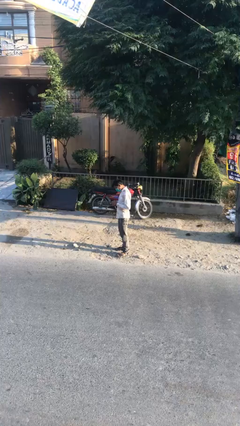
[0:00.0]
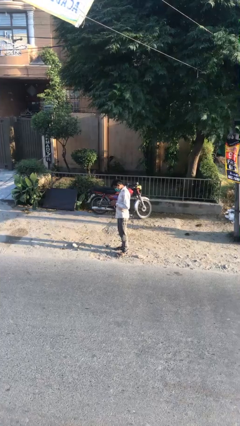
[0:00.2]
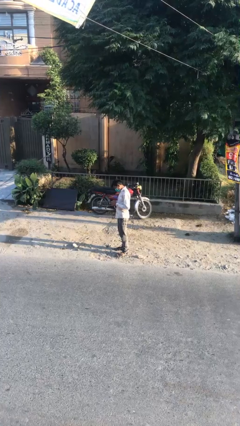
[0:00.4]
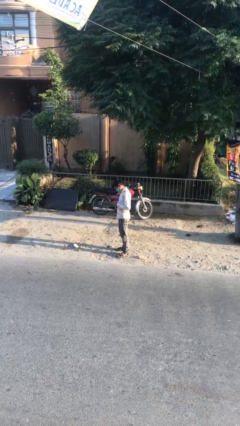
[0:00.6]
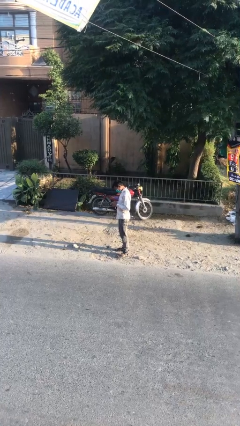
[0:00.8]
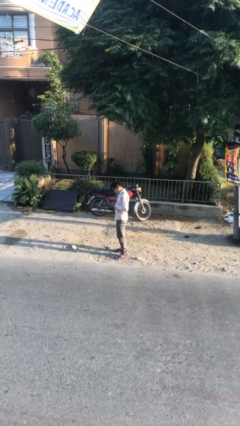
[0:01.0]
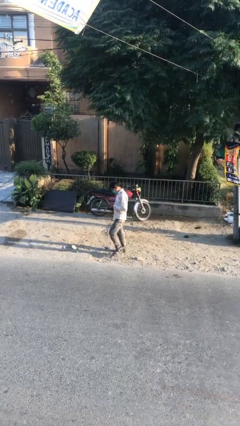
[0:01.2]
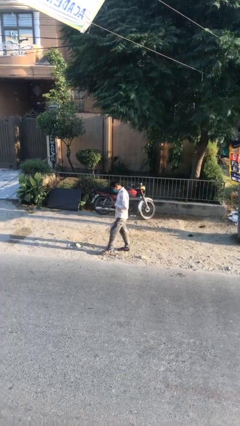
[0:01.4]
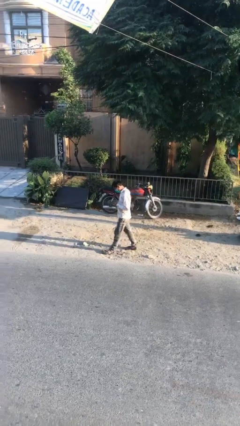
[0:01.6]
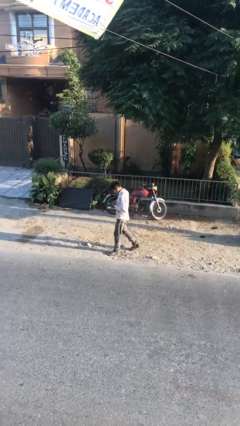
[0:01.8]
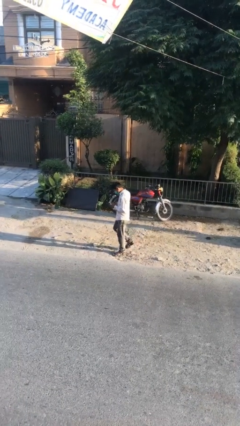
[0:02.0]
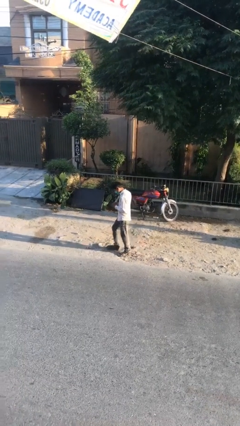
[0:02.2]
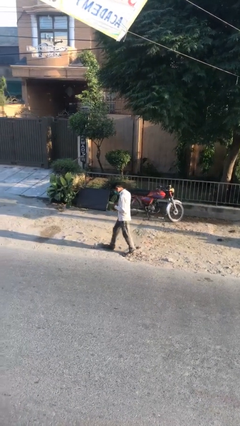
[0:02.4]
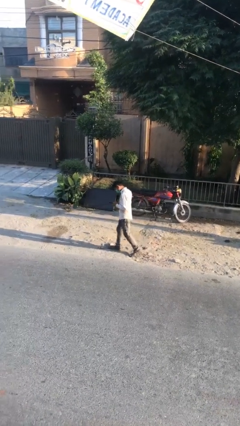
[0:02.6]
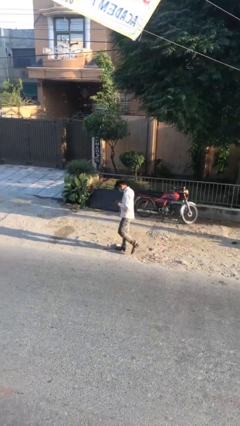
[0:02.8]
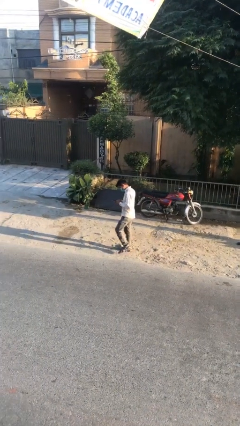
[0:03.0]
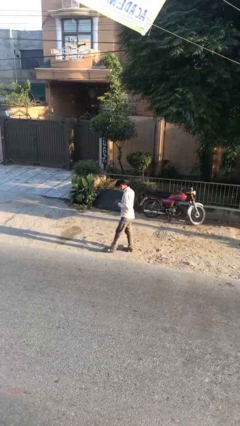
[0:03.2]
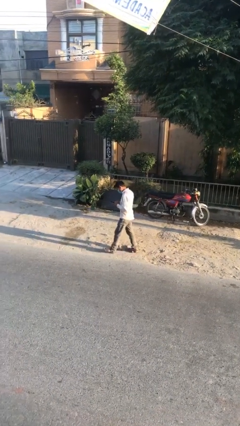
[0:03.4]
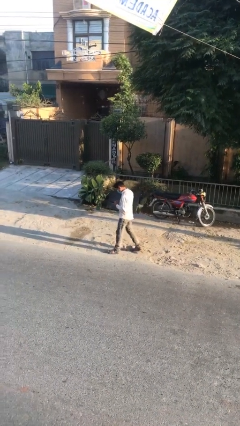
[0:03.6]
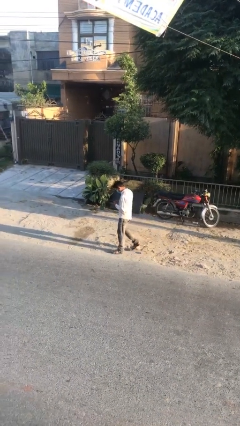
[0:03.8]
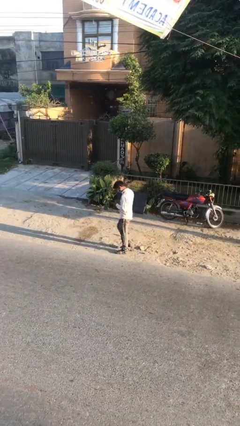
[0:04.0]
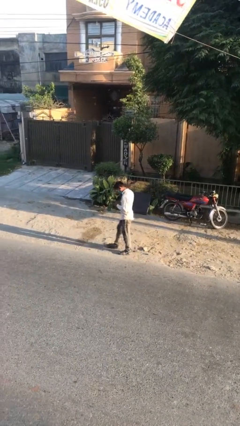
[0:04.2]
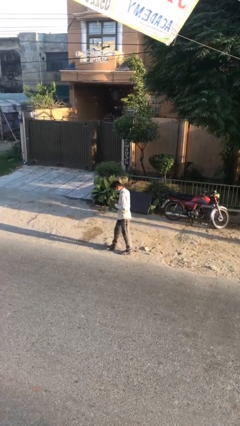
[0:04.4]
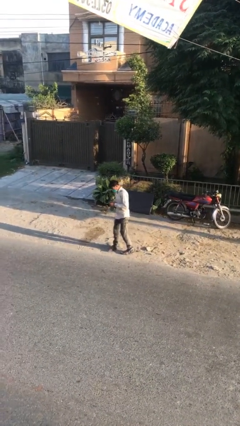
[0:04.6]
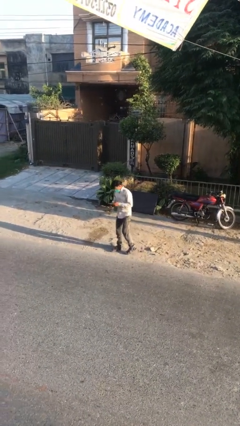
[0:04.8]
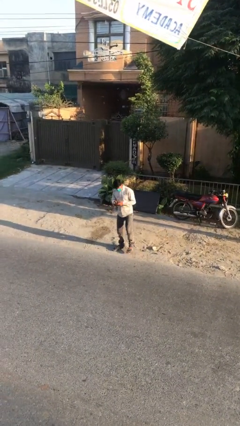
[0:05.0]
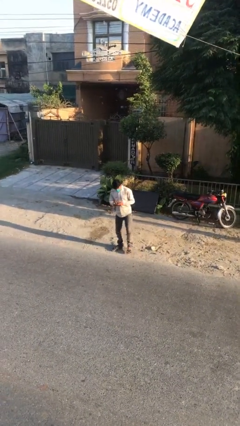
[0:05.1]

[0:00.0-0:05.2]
person texts on phone

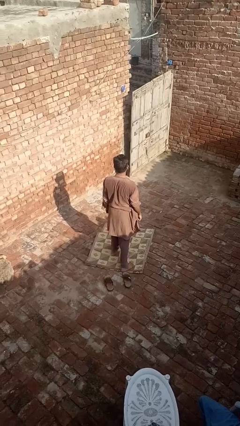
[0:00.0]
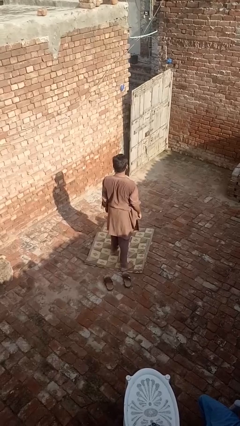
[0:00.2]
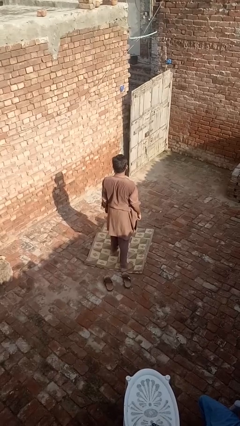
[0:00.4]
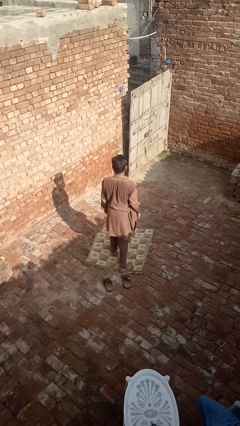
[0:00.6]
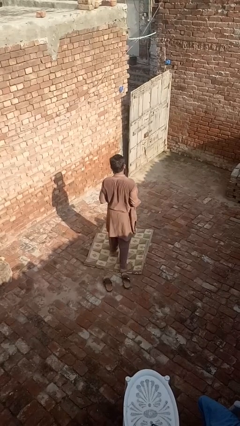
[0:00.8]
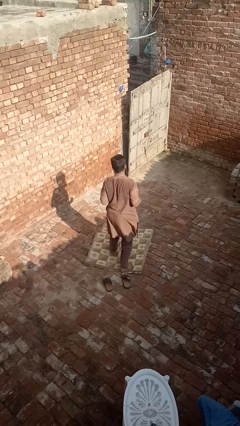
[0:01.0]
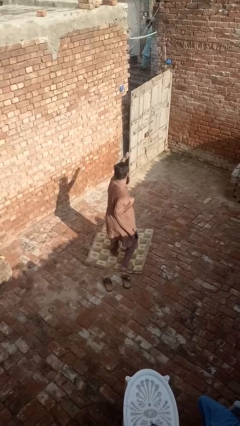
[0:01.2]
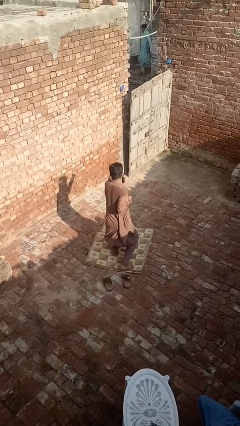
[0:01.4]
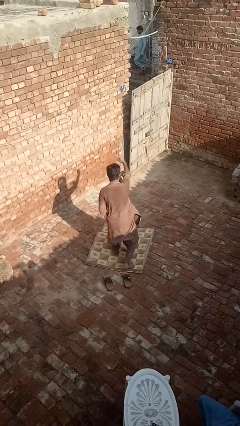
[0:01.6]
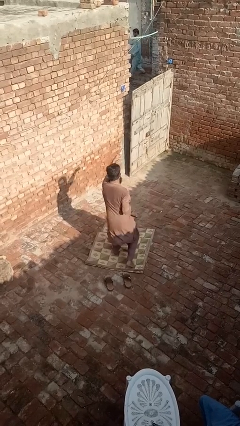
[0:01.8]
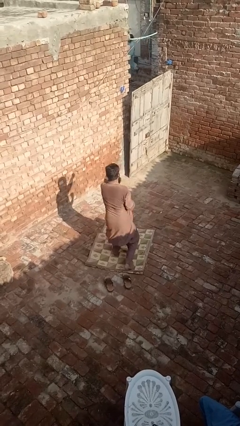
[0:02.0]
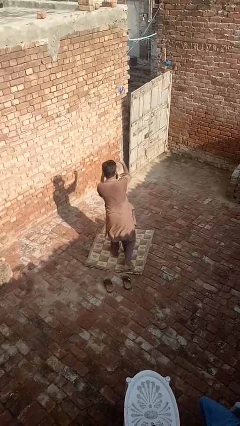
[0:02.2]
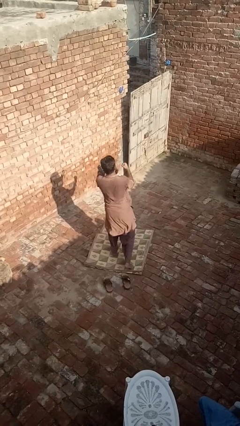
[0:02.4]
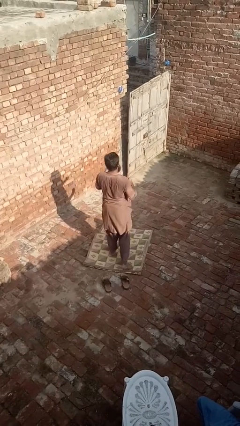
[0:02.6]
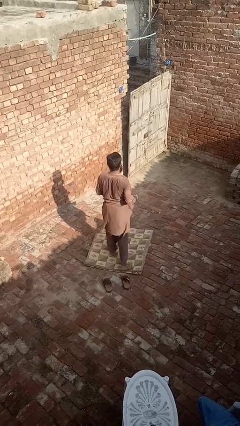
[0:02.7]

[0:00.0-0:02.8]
person punches

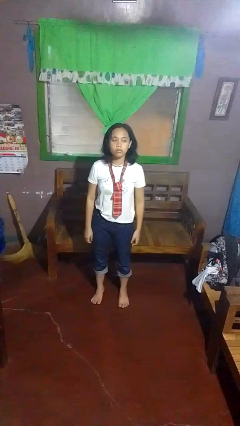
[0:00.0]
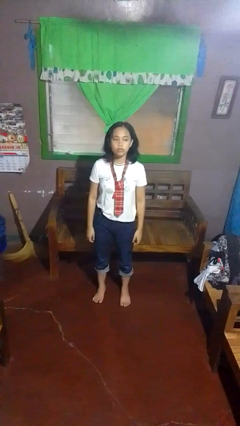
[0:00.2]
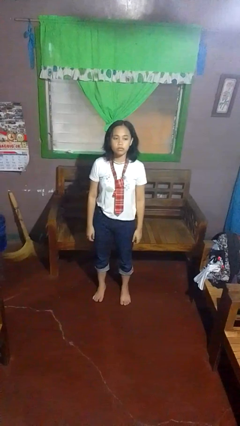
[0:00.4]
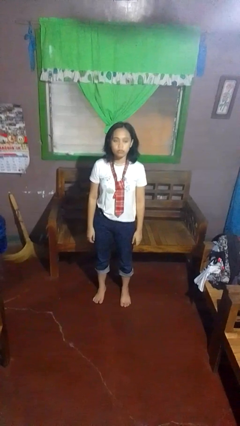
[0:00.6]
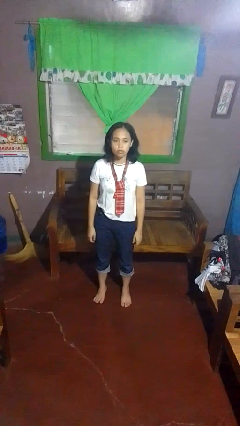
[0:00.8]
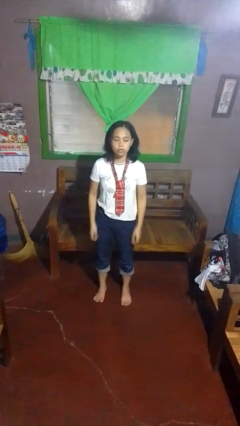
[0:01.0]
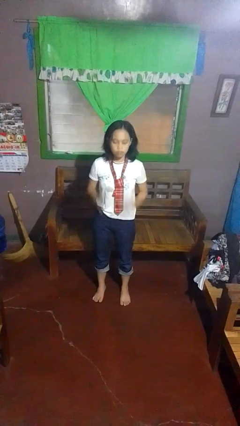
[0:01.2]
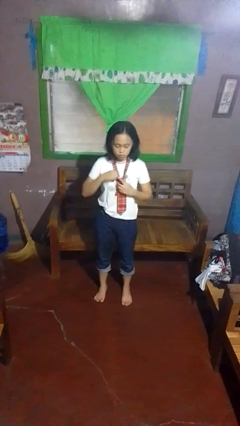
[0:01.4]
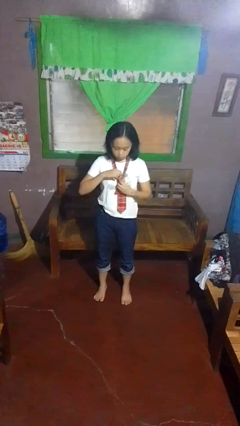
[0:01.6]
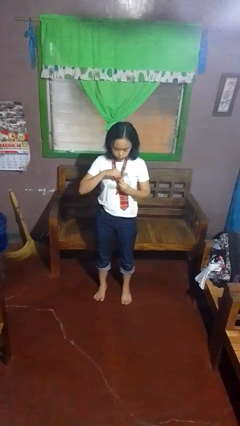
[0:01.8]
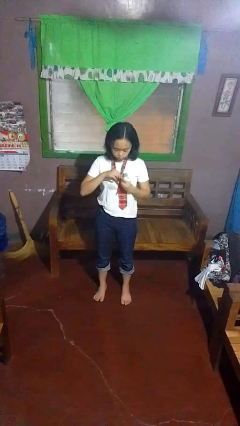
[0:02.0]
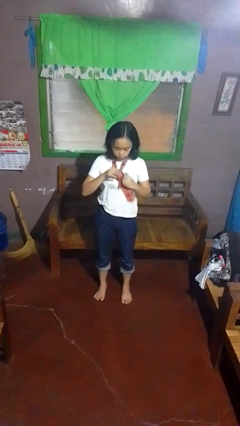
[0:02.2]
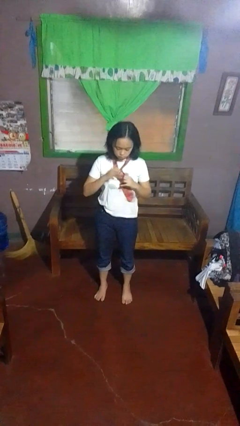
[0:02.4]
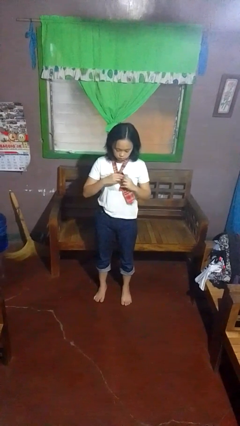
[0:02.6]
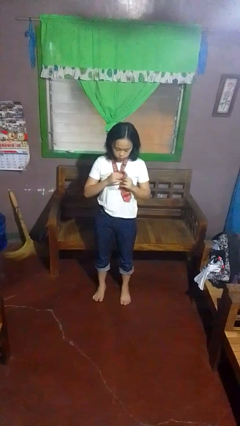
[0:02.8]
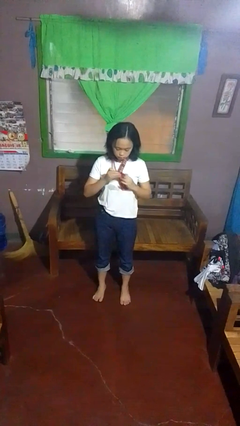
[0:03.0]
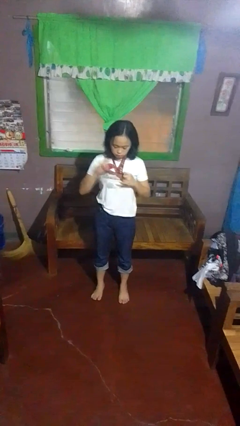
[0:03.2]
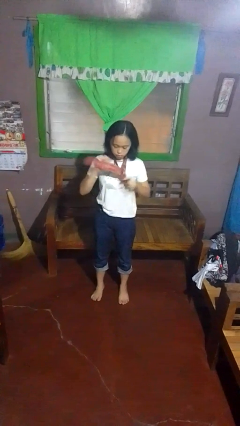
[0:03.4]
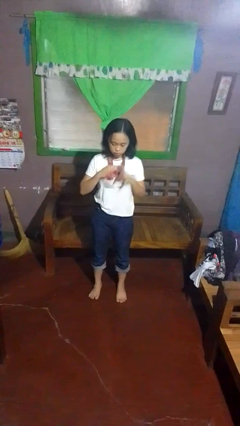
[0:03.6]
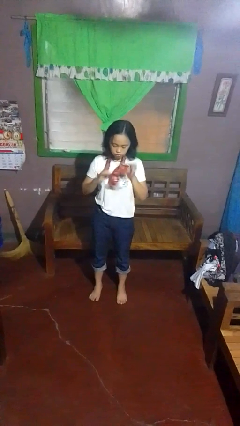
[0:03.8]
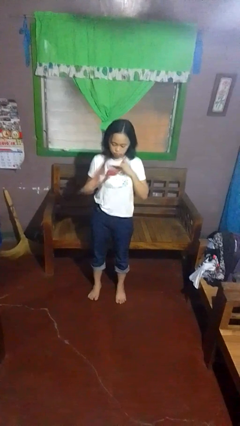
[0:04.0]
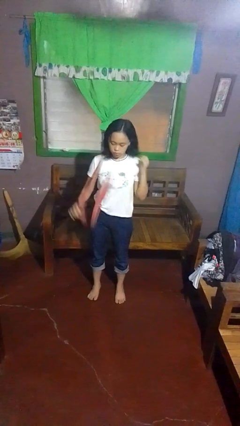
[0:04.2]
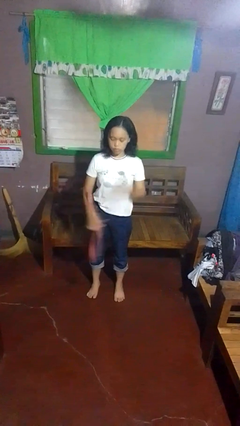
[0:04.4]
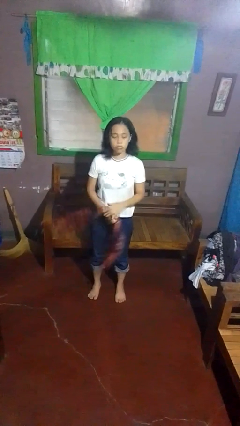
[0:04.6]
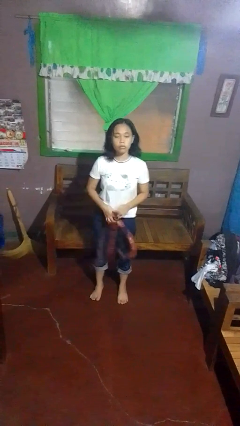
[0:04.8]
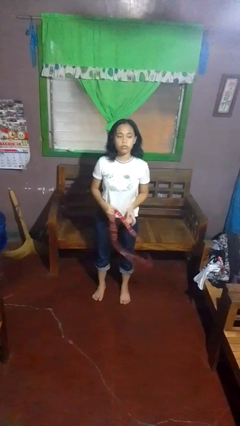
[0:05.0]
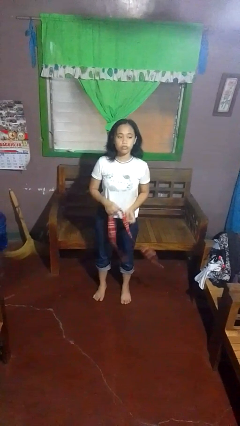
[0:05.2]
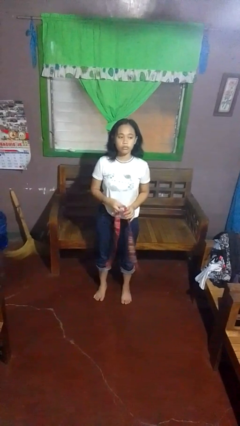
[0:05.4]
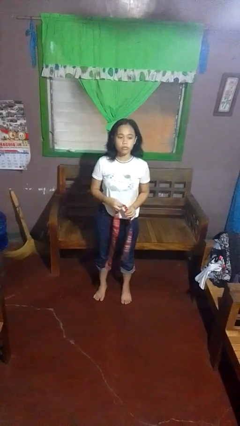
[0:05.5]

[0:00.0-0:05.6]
person takes off necktie

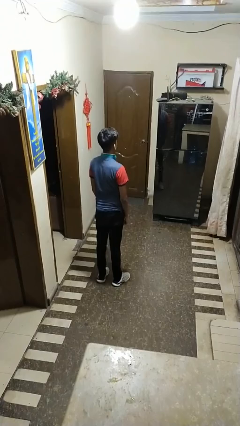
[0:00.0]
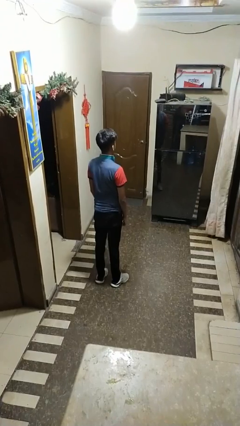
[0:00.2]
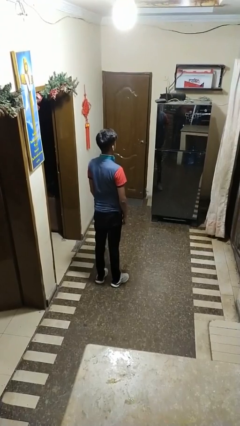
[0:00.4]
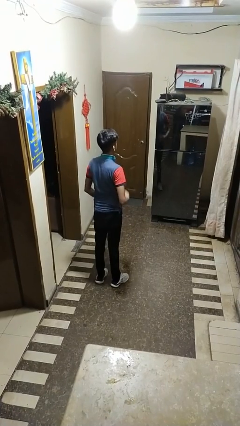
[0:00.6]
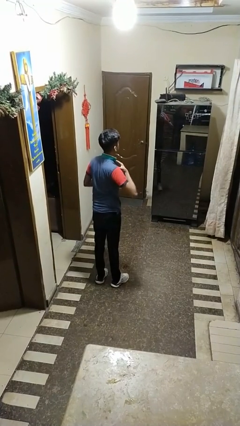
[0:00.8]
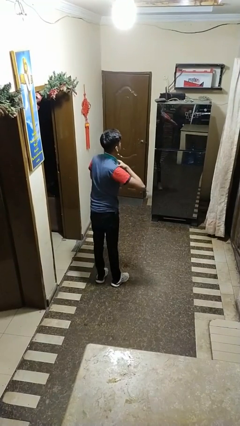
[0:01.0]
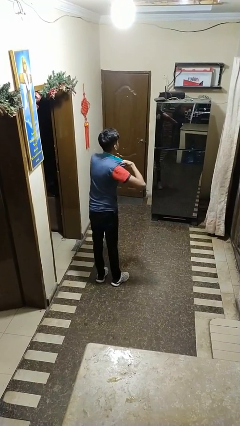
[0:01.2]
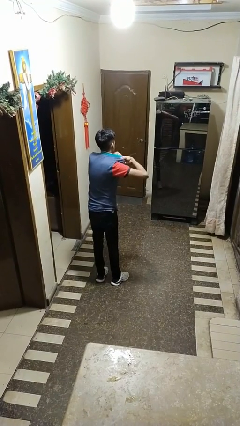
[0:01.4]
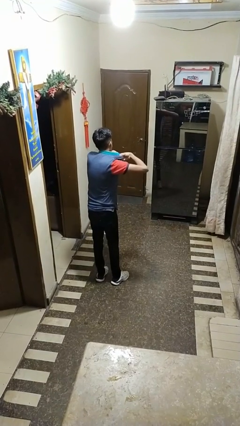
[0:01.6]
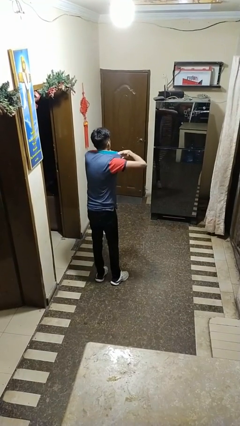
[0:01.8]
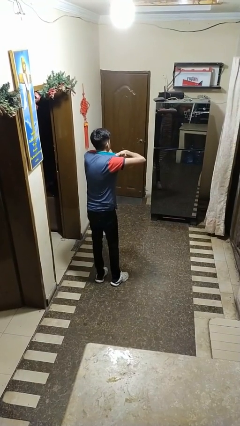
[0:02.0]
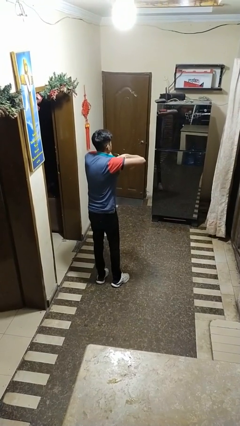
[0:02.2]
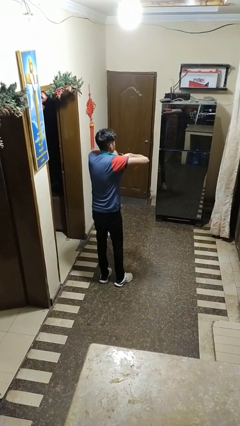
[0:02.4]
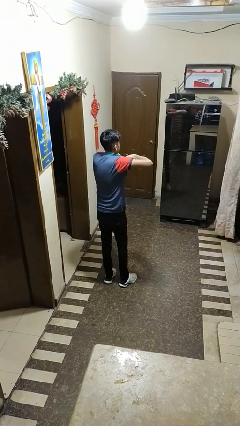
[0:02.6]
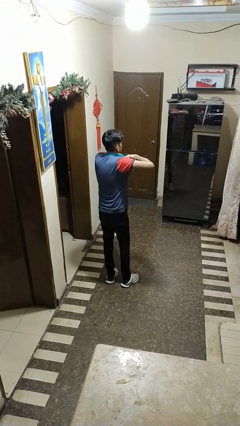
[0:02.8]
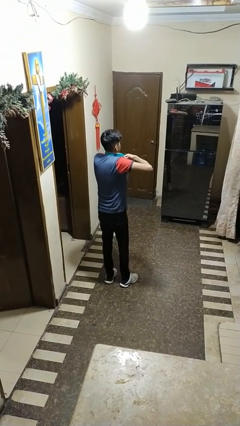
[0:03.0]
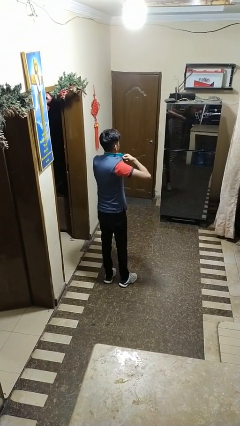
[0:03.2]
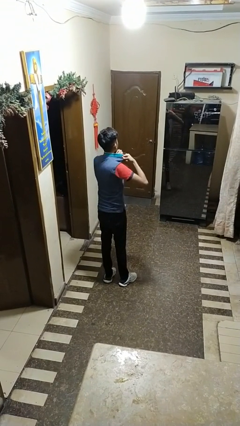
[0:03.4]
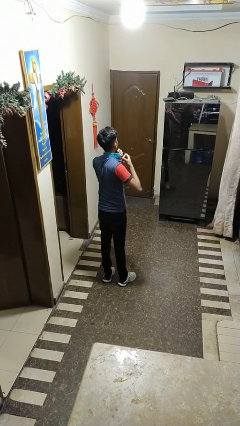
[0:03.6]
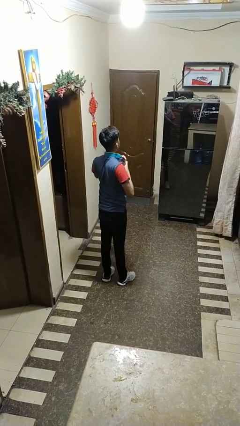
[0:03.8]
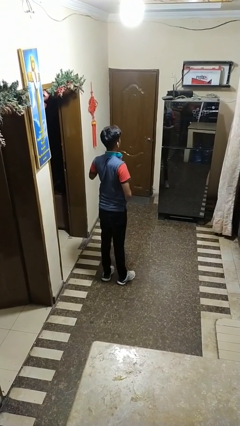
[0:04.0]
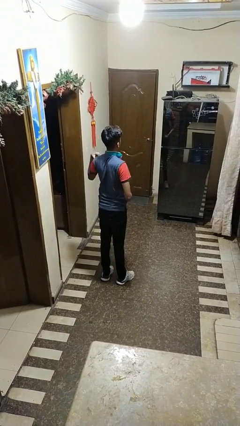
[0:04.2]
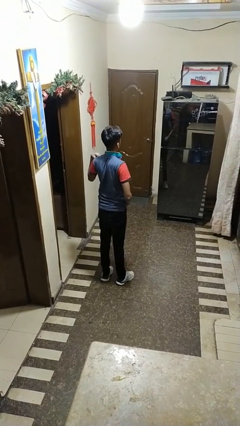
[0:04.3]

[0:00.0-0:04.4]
person applies deodorant

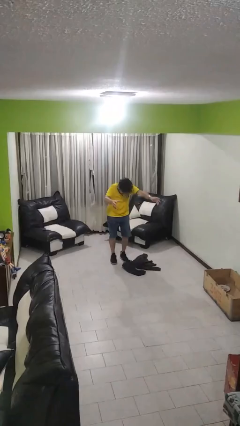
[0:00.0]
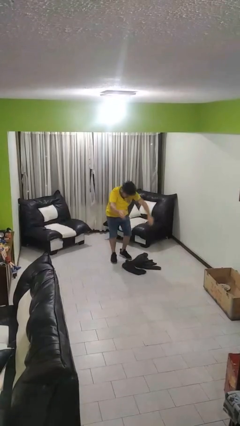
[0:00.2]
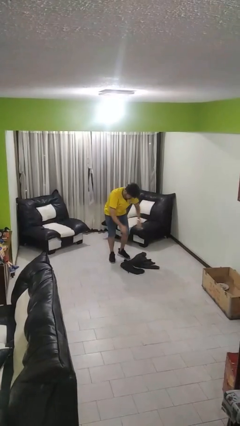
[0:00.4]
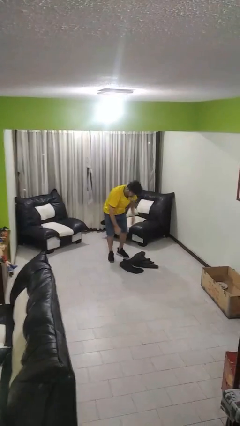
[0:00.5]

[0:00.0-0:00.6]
person drops object
